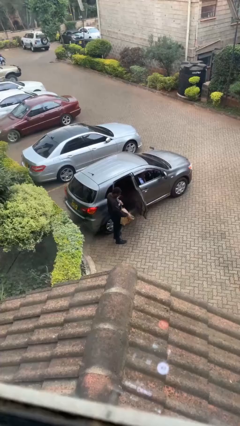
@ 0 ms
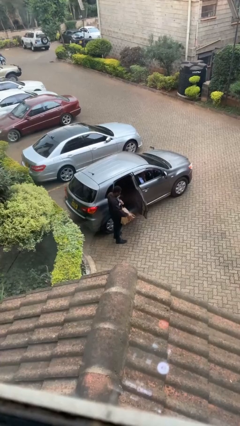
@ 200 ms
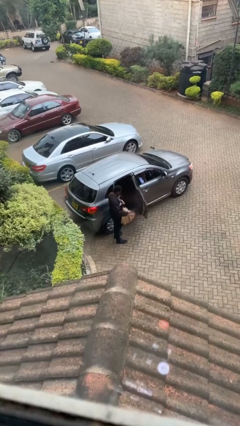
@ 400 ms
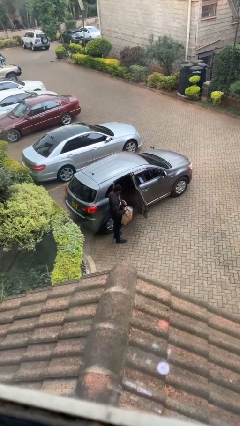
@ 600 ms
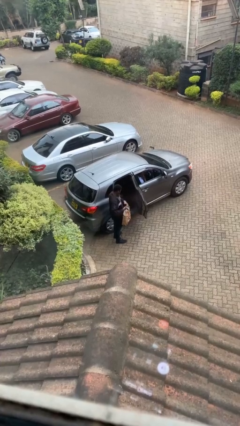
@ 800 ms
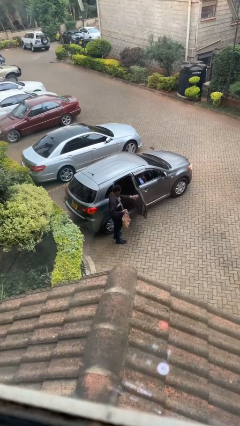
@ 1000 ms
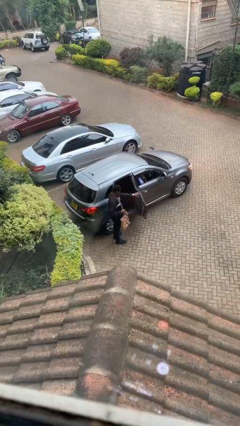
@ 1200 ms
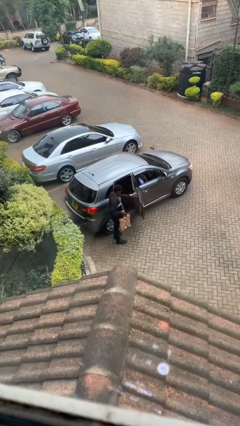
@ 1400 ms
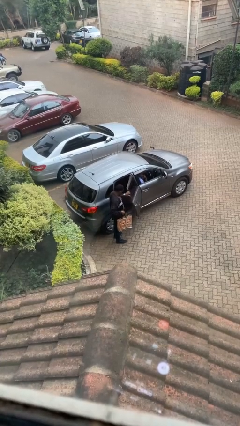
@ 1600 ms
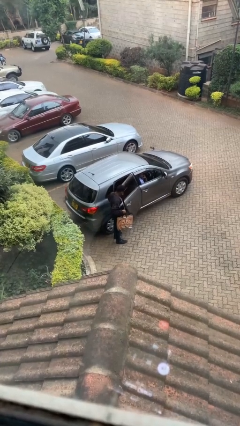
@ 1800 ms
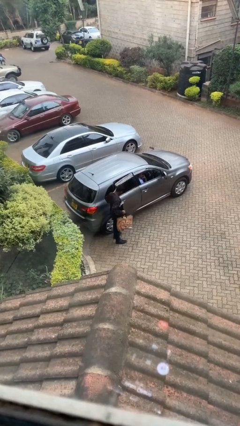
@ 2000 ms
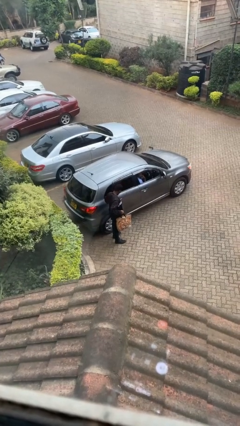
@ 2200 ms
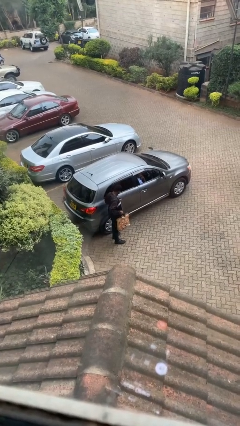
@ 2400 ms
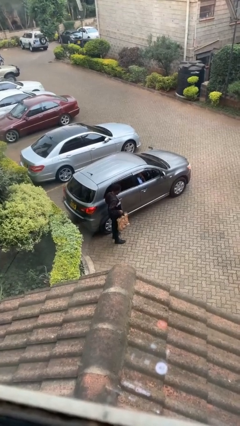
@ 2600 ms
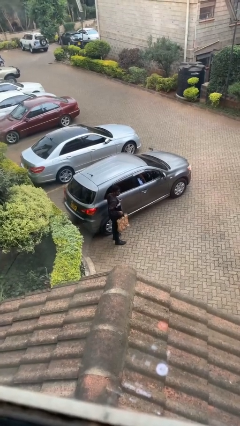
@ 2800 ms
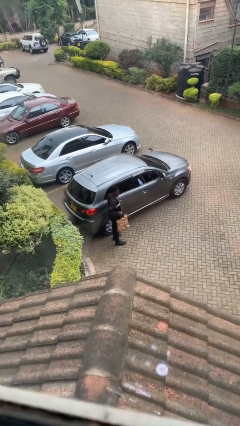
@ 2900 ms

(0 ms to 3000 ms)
person closes car door

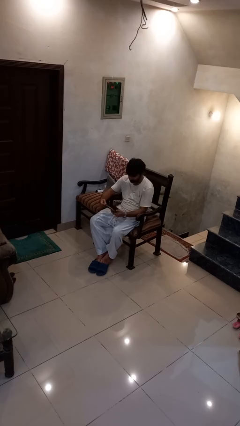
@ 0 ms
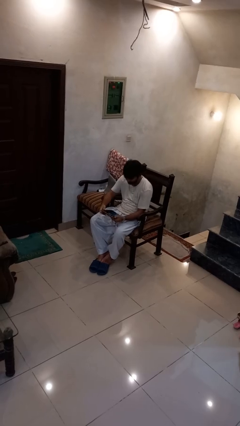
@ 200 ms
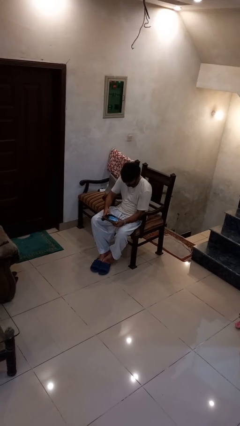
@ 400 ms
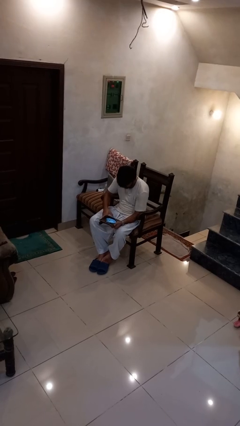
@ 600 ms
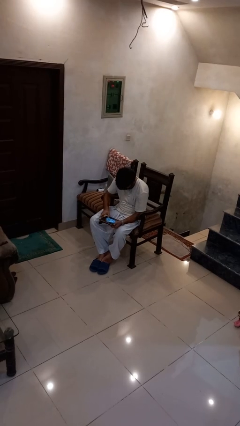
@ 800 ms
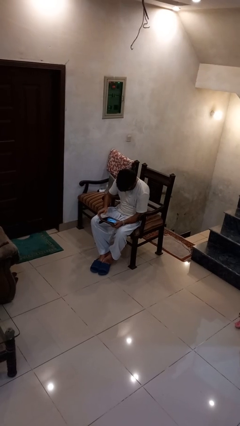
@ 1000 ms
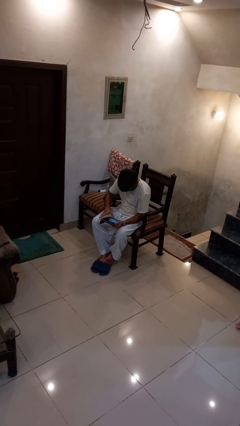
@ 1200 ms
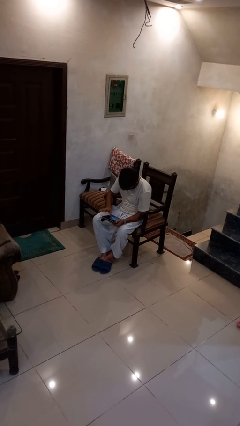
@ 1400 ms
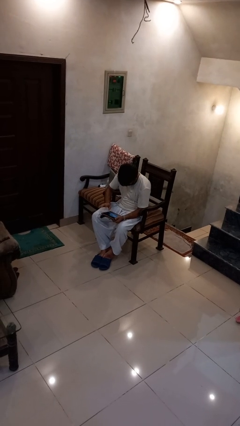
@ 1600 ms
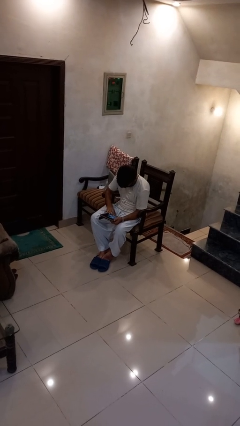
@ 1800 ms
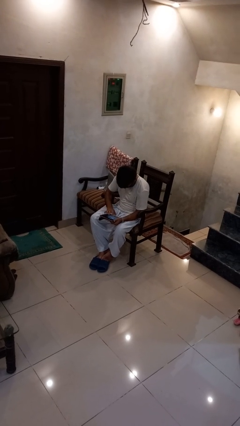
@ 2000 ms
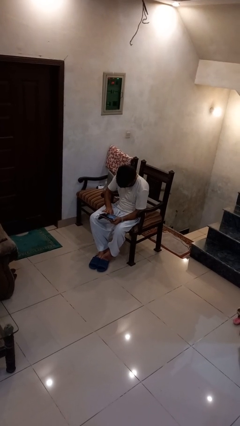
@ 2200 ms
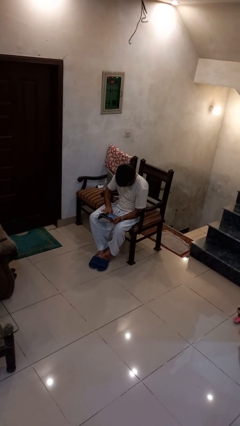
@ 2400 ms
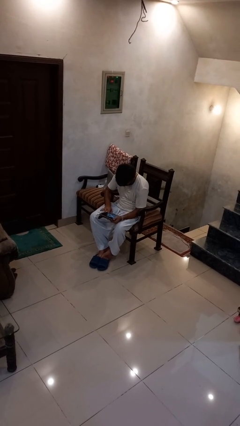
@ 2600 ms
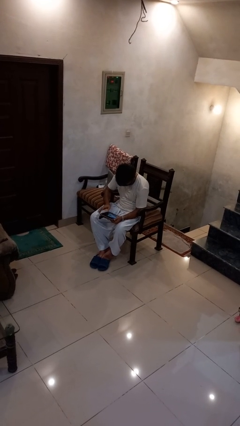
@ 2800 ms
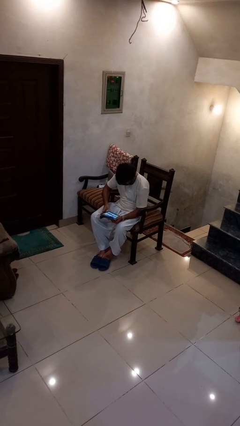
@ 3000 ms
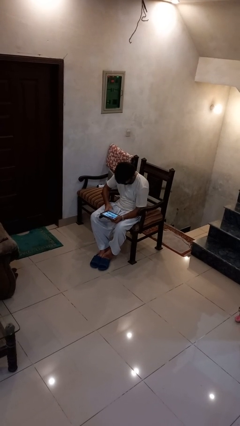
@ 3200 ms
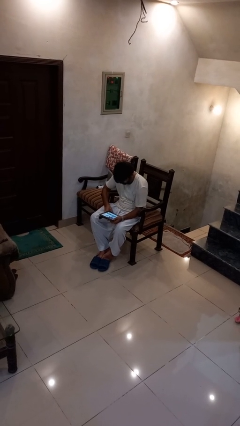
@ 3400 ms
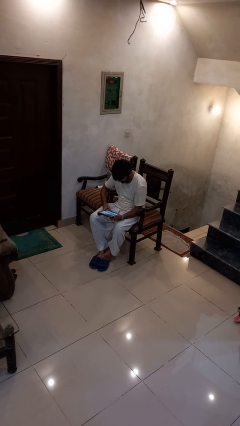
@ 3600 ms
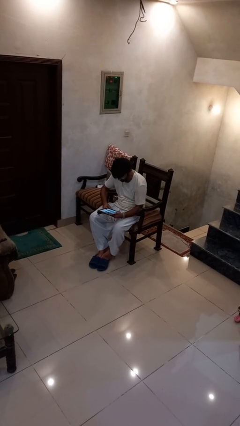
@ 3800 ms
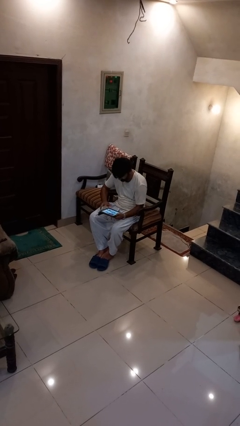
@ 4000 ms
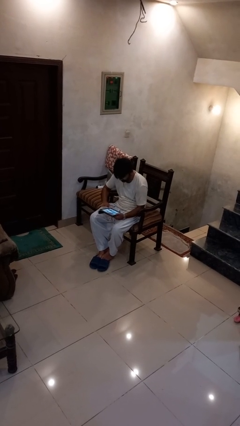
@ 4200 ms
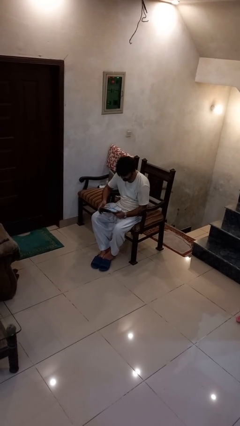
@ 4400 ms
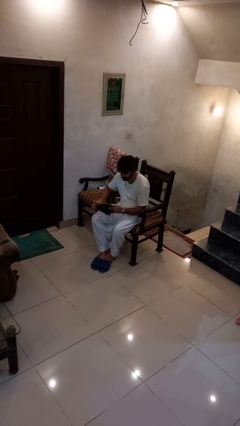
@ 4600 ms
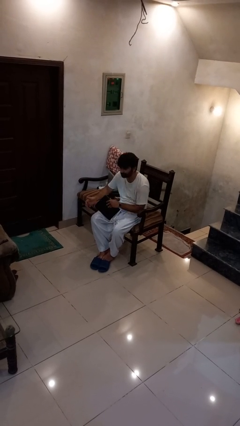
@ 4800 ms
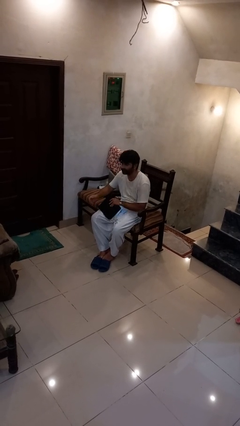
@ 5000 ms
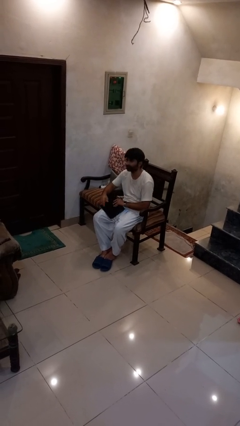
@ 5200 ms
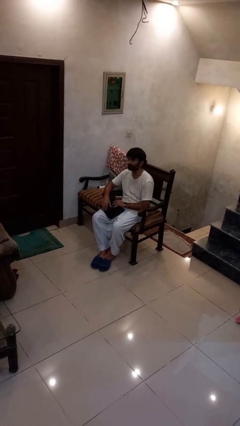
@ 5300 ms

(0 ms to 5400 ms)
person interacts with tablet

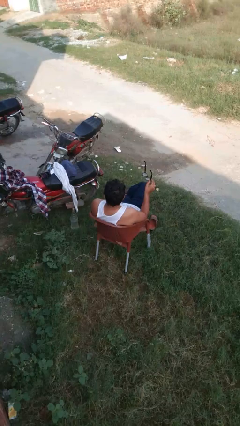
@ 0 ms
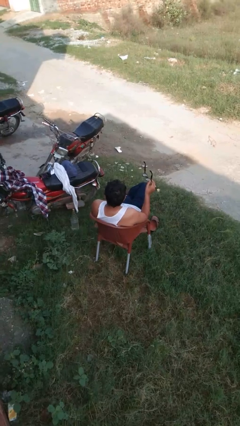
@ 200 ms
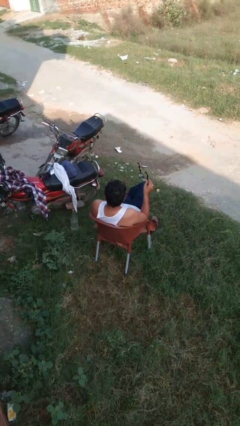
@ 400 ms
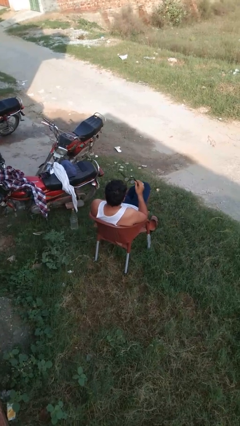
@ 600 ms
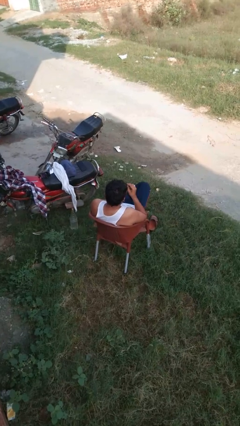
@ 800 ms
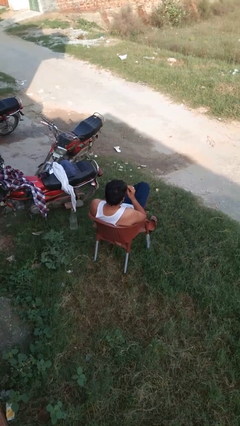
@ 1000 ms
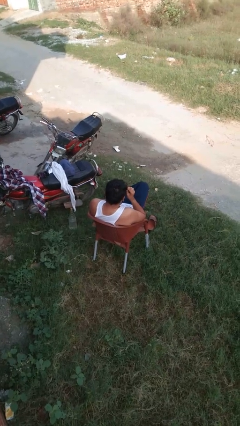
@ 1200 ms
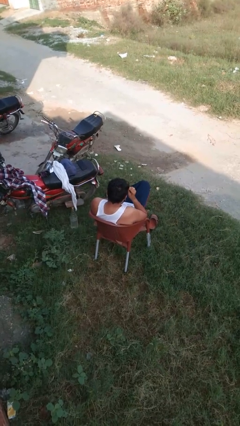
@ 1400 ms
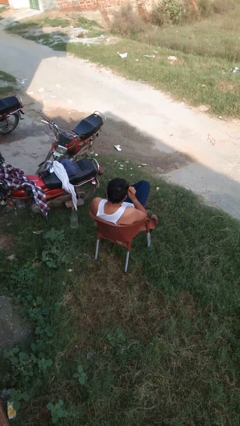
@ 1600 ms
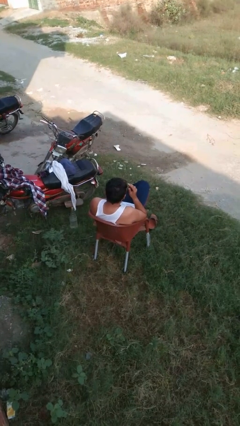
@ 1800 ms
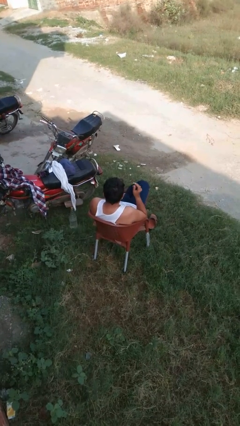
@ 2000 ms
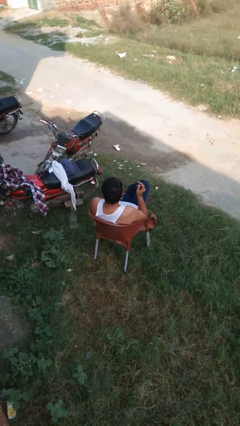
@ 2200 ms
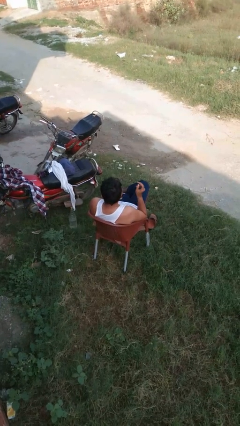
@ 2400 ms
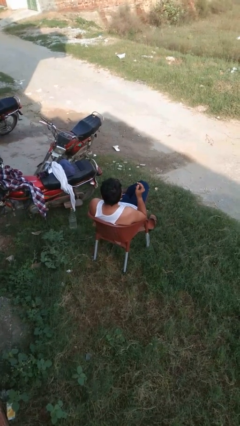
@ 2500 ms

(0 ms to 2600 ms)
person puts on glasses

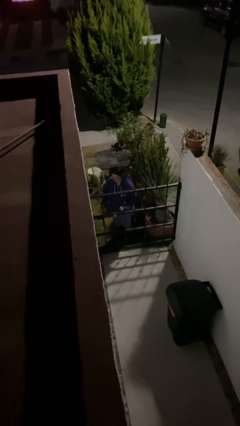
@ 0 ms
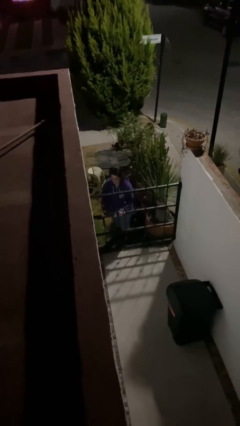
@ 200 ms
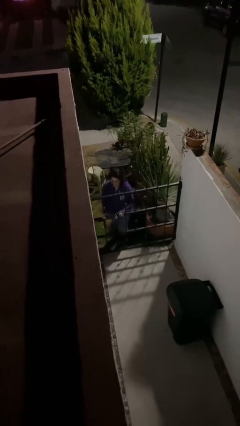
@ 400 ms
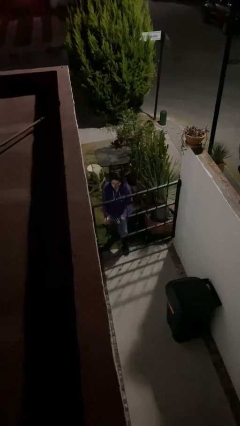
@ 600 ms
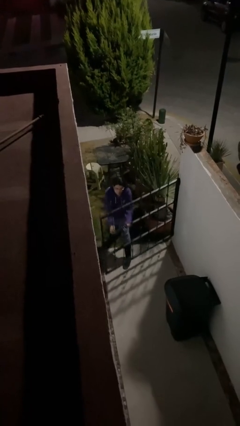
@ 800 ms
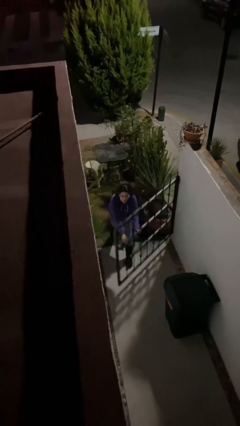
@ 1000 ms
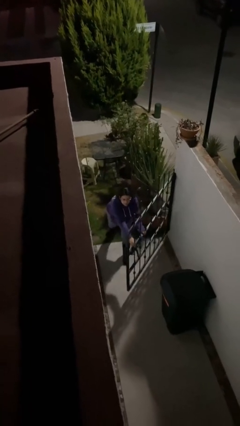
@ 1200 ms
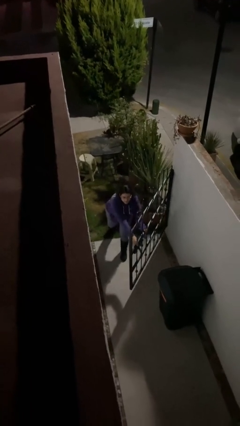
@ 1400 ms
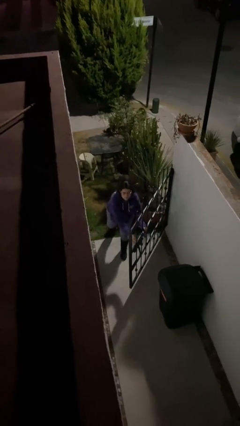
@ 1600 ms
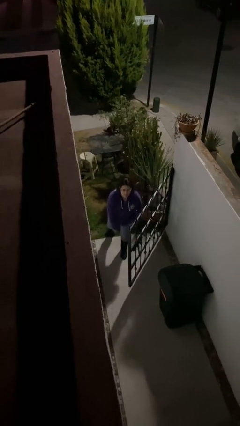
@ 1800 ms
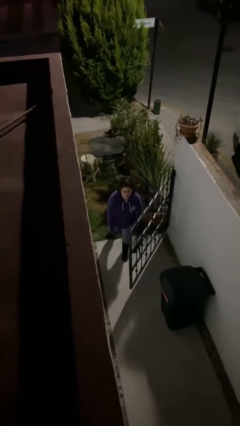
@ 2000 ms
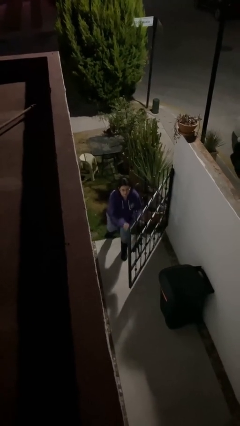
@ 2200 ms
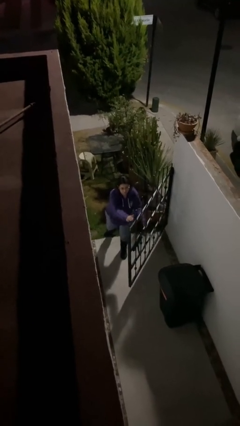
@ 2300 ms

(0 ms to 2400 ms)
person opens facility door

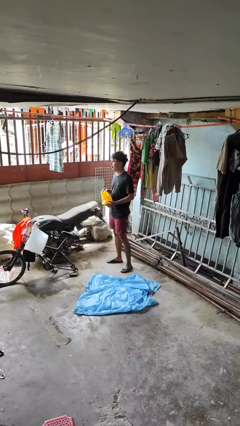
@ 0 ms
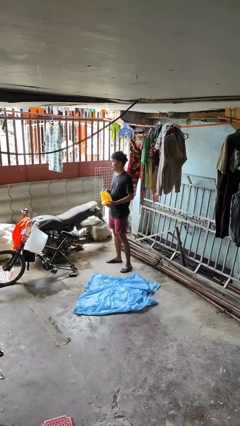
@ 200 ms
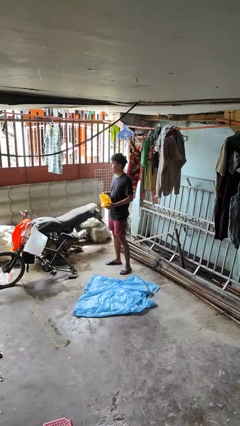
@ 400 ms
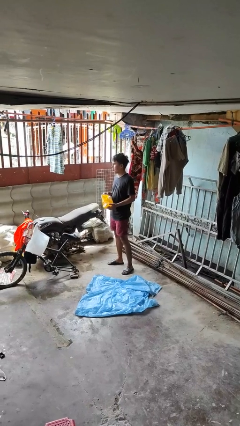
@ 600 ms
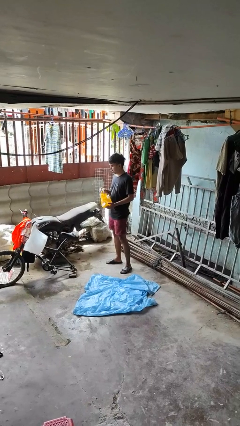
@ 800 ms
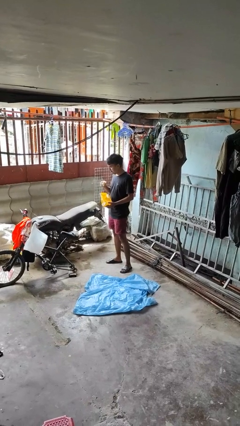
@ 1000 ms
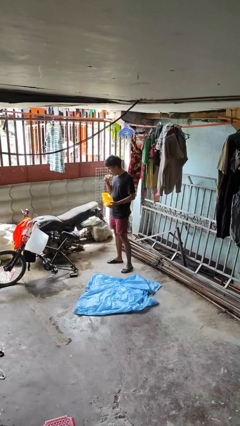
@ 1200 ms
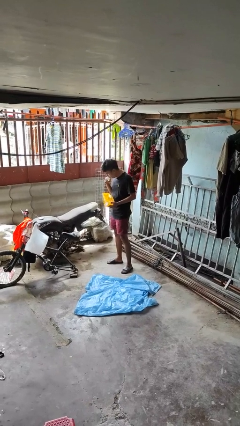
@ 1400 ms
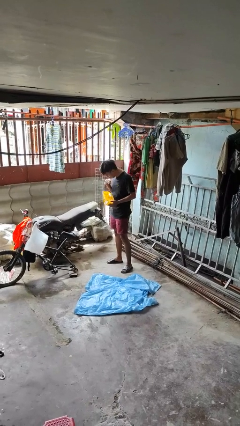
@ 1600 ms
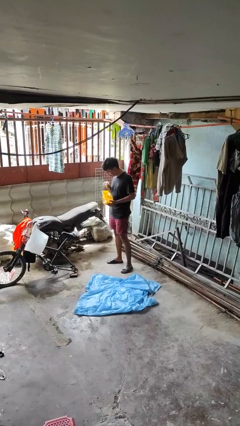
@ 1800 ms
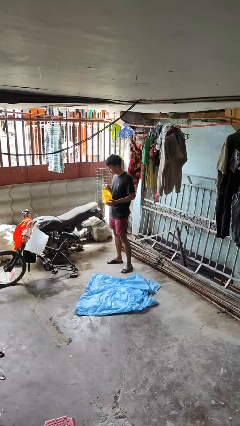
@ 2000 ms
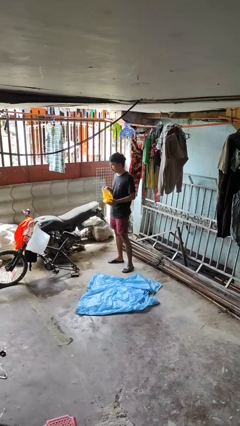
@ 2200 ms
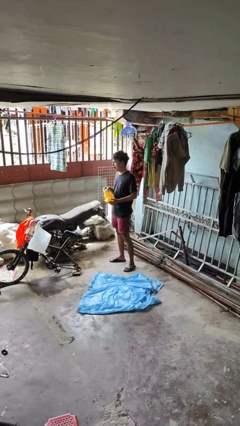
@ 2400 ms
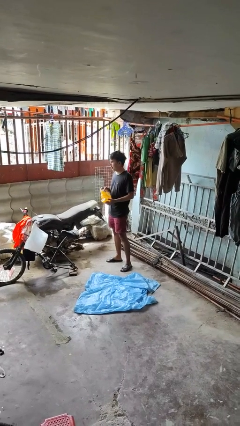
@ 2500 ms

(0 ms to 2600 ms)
person eats snack from bag

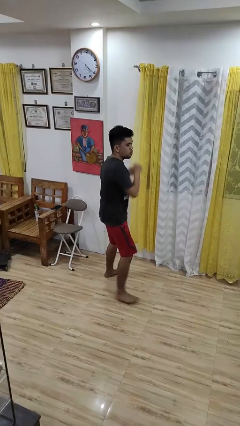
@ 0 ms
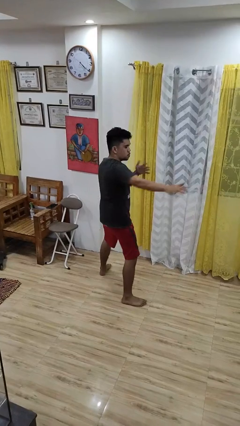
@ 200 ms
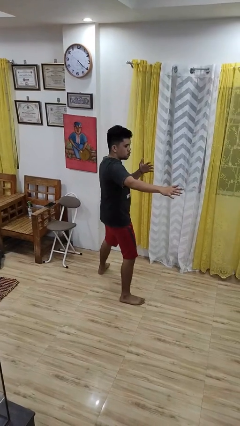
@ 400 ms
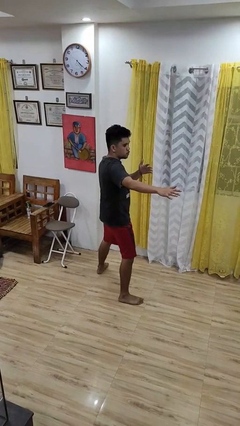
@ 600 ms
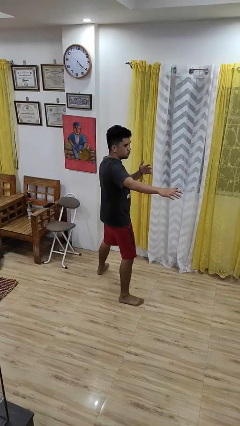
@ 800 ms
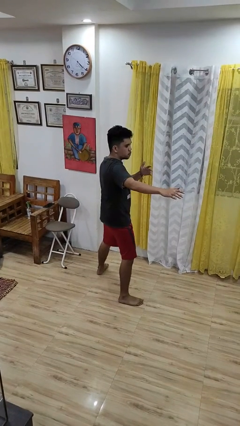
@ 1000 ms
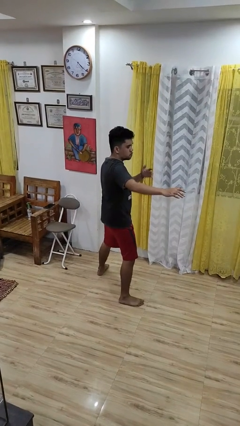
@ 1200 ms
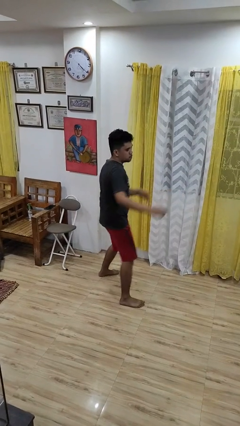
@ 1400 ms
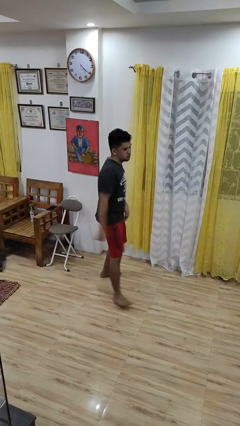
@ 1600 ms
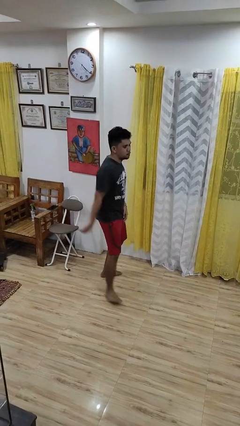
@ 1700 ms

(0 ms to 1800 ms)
person karate chop
